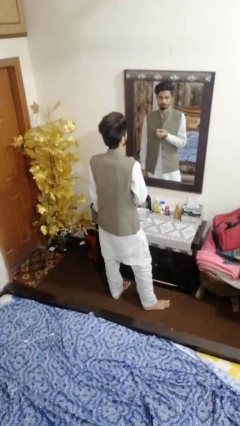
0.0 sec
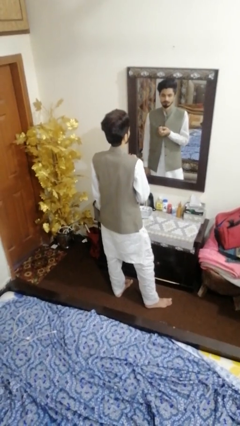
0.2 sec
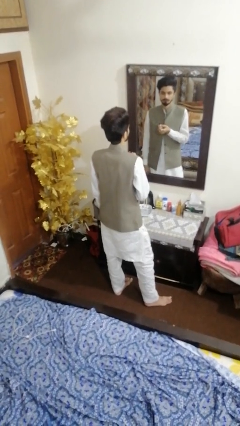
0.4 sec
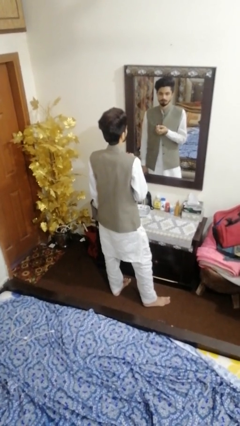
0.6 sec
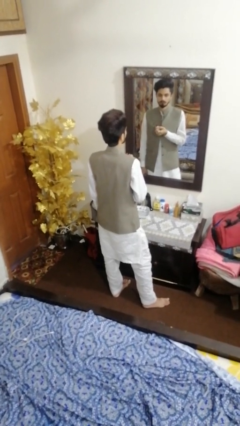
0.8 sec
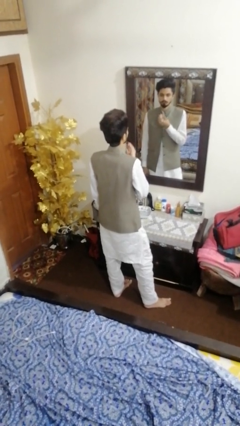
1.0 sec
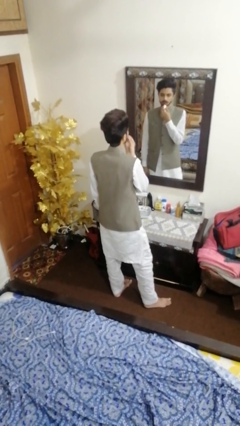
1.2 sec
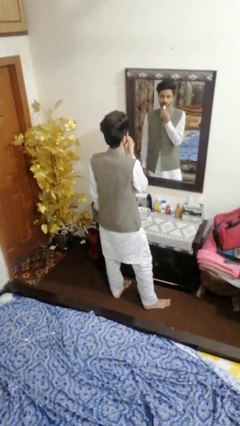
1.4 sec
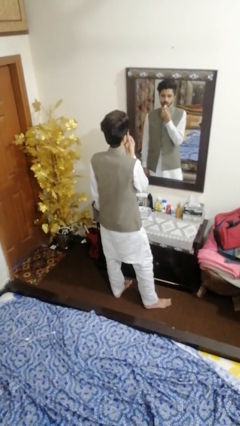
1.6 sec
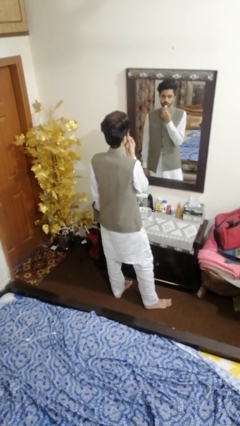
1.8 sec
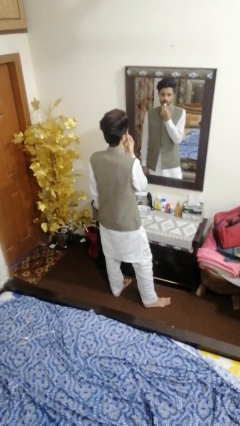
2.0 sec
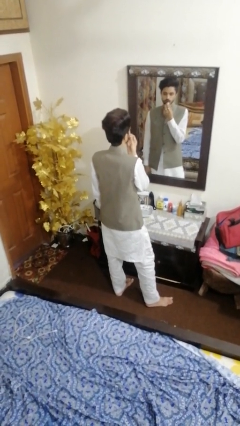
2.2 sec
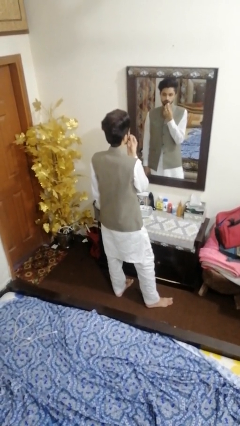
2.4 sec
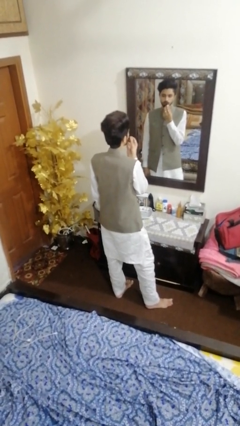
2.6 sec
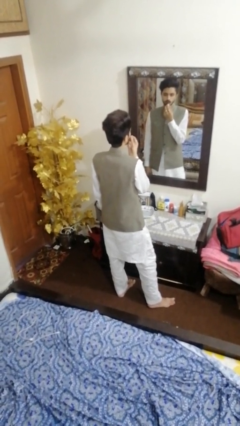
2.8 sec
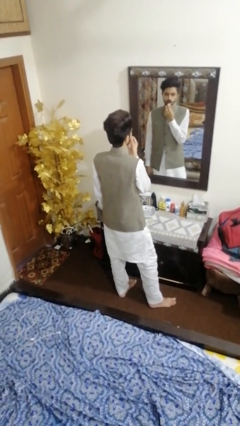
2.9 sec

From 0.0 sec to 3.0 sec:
person applies lip makeup

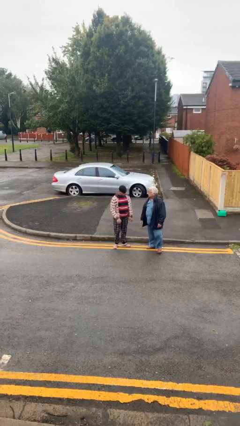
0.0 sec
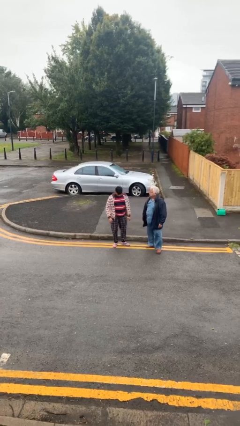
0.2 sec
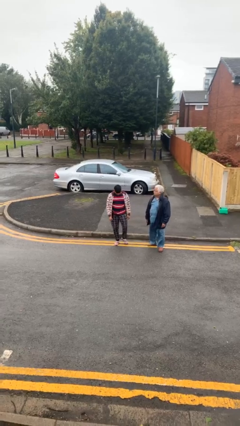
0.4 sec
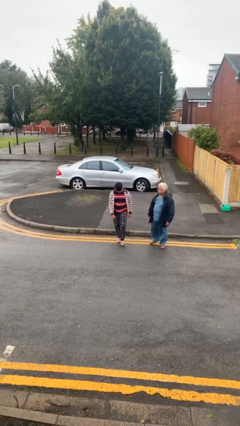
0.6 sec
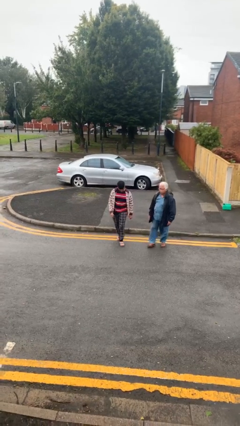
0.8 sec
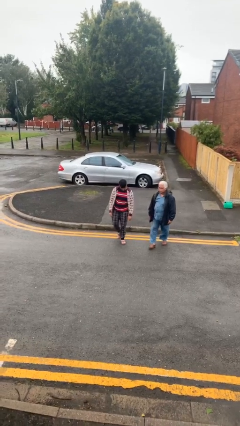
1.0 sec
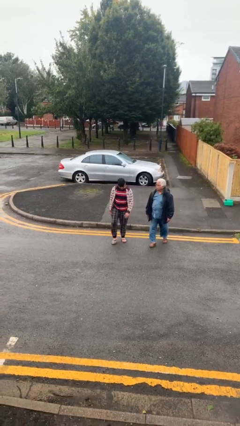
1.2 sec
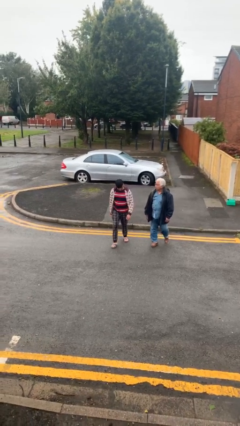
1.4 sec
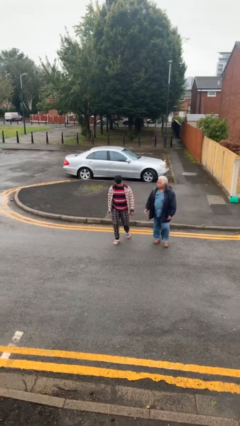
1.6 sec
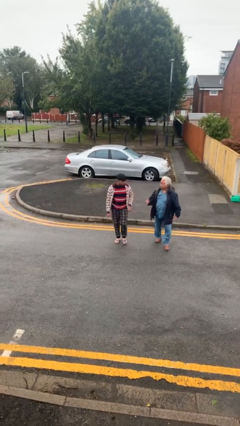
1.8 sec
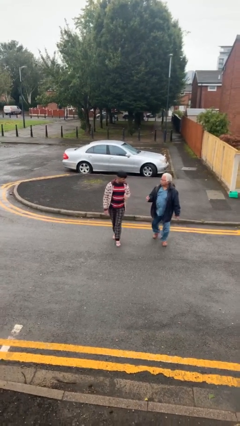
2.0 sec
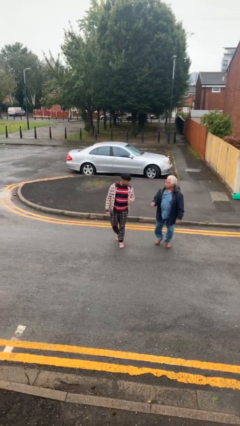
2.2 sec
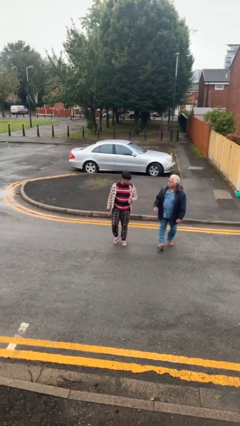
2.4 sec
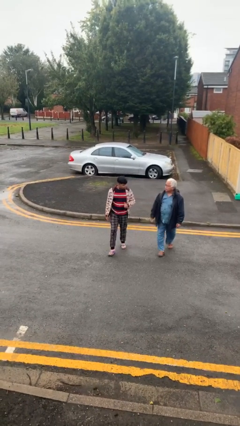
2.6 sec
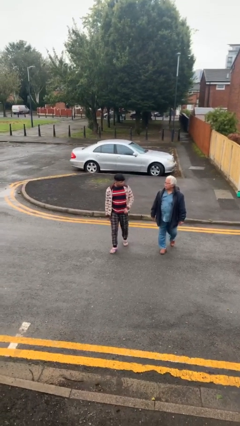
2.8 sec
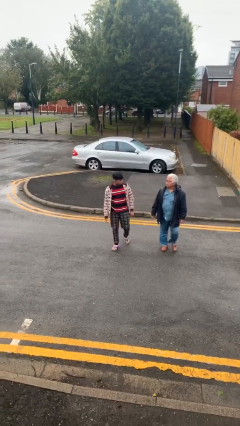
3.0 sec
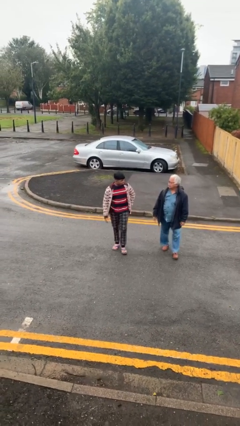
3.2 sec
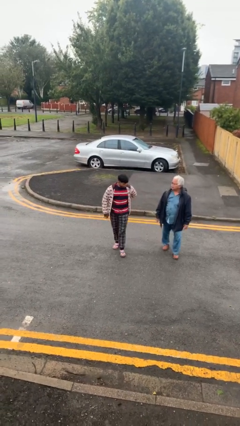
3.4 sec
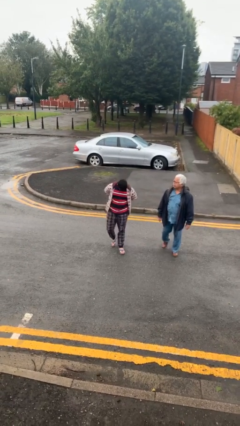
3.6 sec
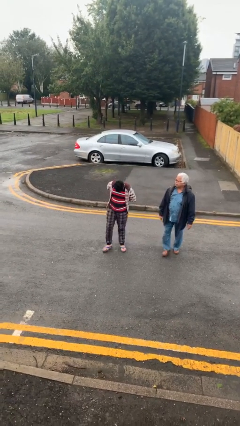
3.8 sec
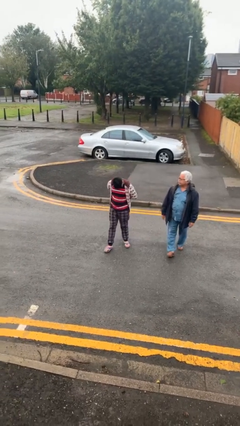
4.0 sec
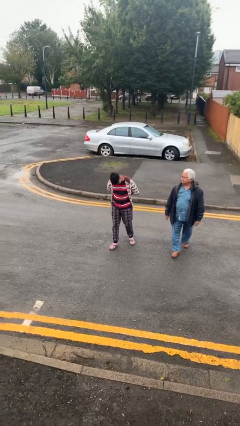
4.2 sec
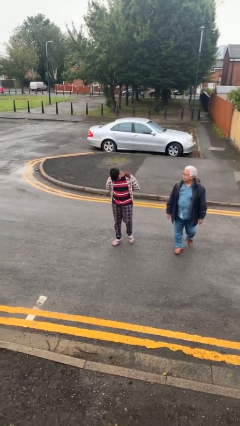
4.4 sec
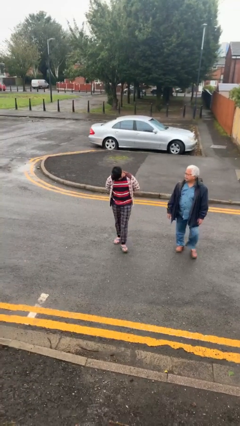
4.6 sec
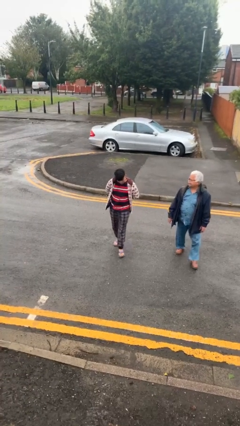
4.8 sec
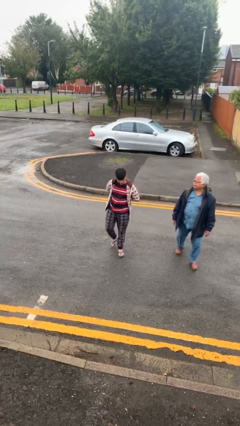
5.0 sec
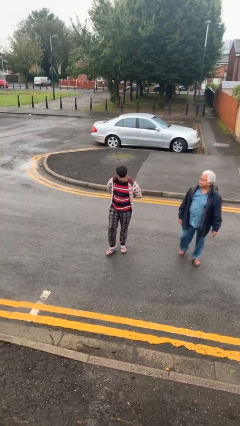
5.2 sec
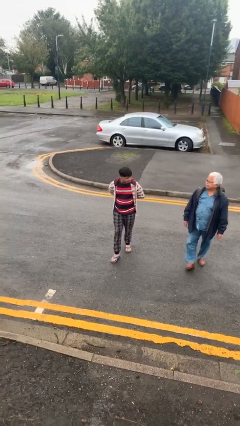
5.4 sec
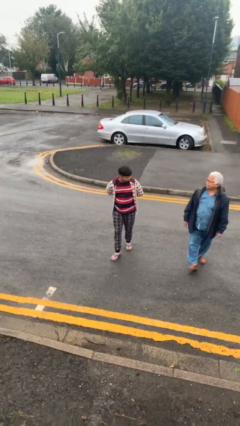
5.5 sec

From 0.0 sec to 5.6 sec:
person talks to person

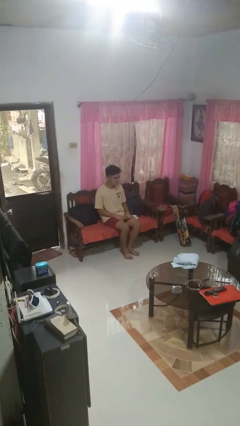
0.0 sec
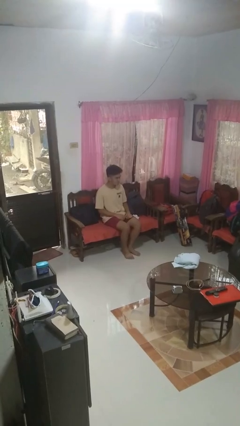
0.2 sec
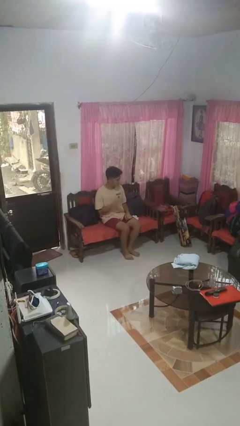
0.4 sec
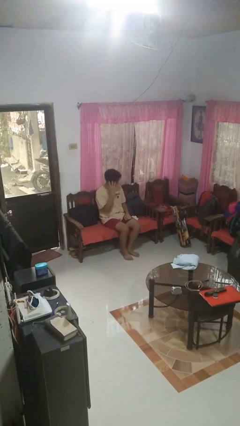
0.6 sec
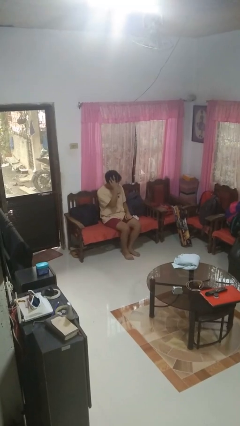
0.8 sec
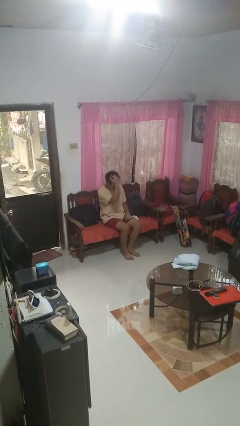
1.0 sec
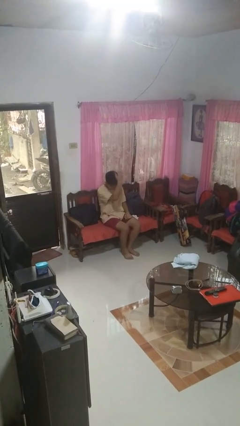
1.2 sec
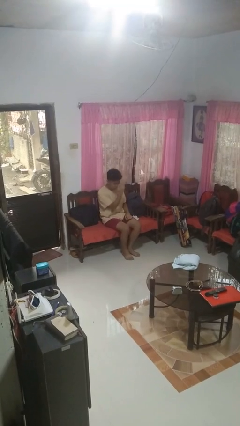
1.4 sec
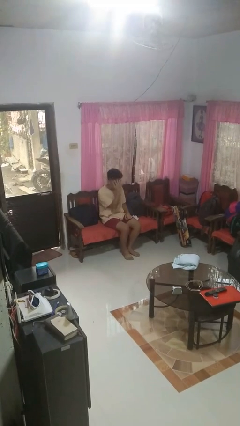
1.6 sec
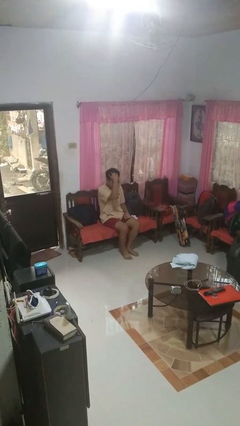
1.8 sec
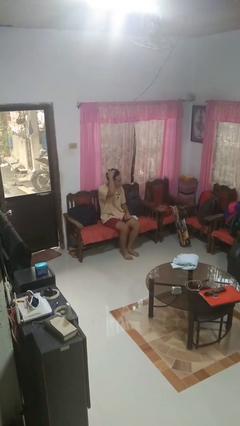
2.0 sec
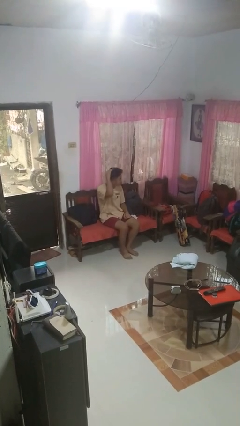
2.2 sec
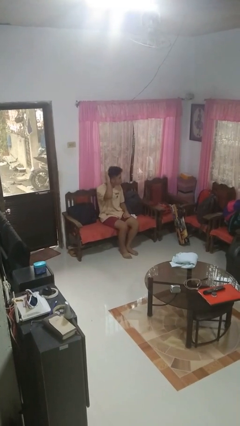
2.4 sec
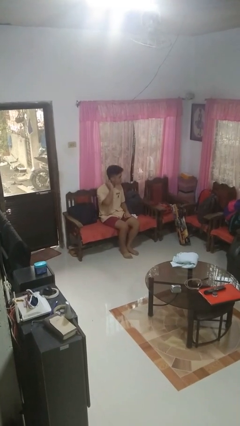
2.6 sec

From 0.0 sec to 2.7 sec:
person strokes hair

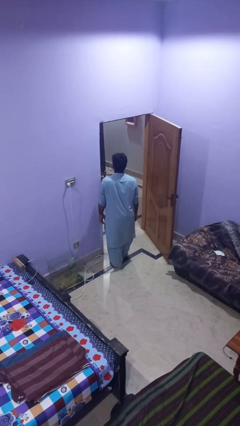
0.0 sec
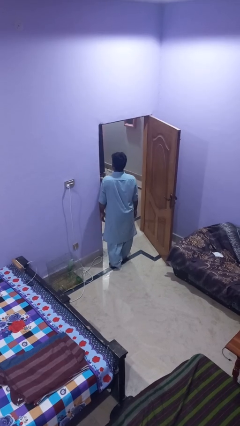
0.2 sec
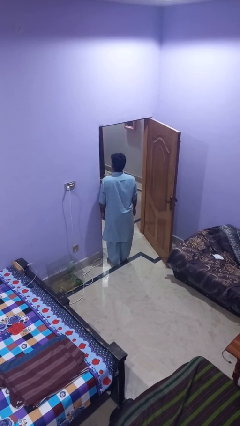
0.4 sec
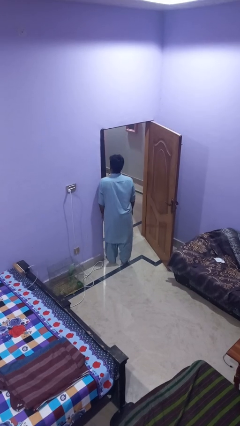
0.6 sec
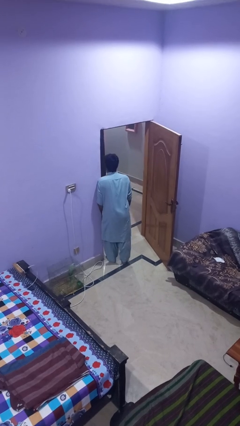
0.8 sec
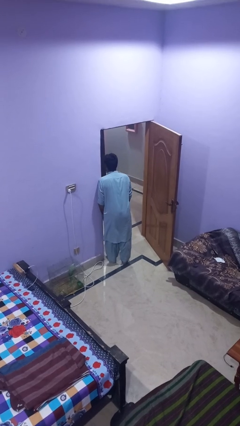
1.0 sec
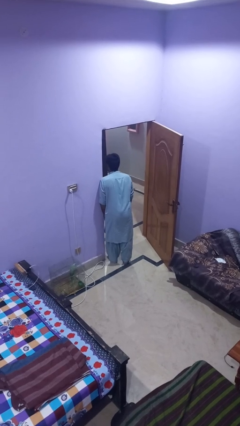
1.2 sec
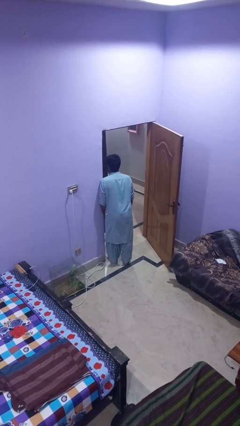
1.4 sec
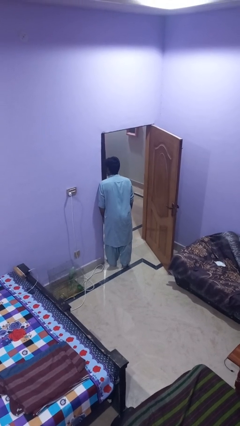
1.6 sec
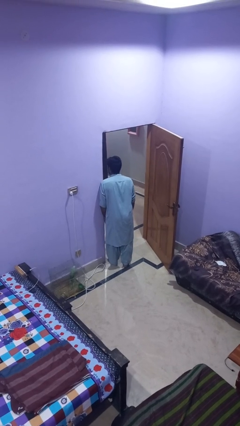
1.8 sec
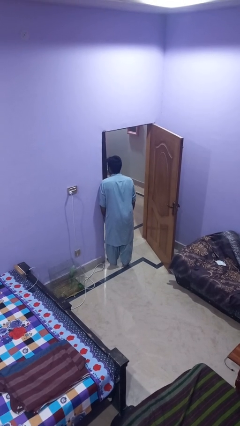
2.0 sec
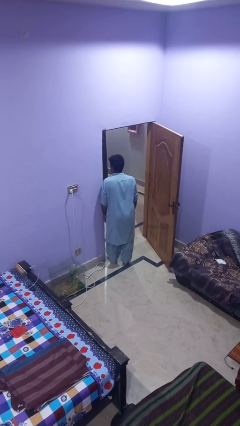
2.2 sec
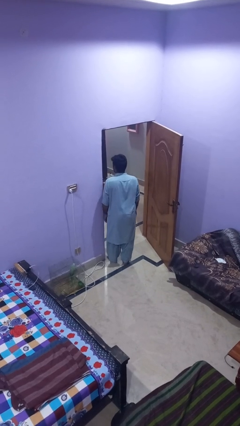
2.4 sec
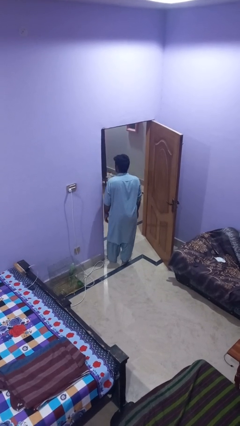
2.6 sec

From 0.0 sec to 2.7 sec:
person bumps into wall

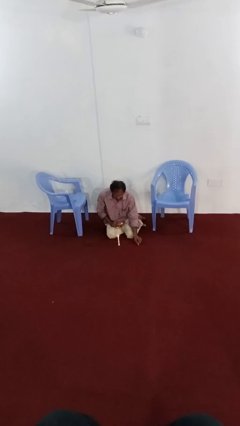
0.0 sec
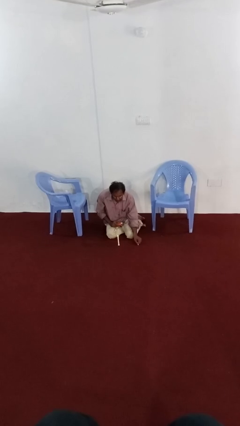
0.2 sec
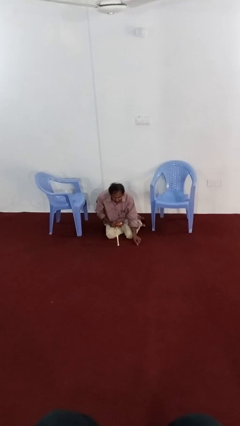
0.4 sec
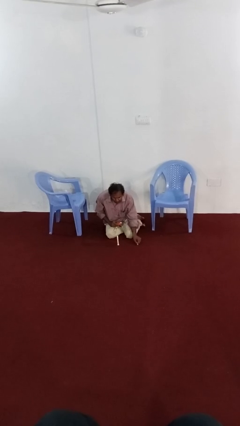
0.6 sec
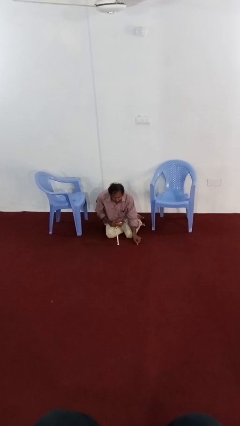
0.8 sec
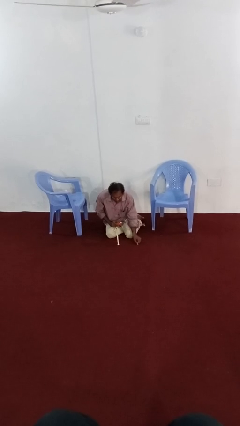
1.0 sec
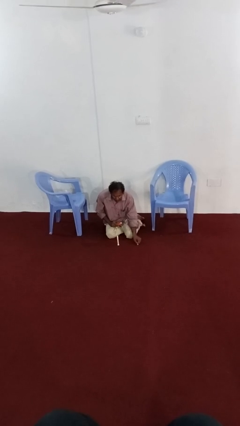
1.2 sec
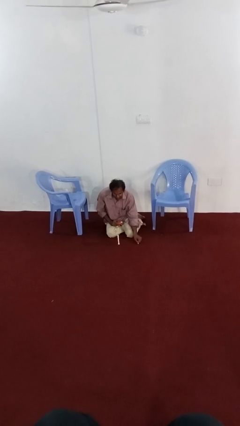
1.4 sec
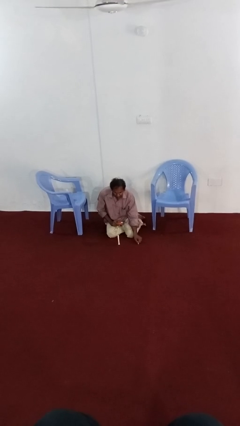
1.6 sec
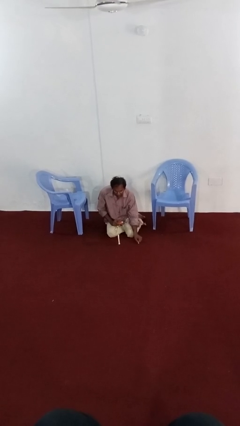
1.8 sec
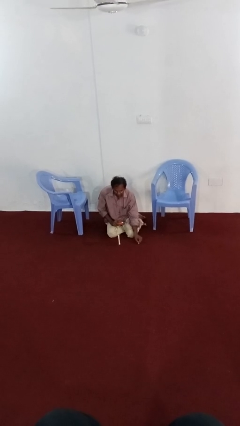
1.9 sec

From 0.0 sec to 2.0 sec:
person extinguishes candle

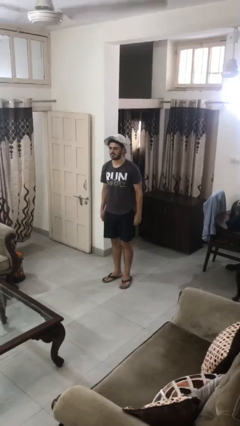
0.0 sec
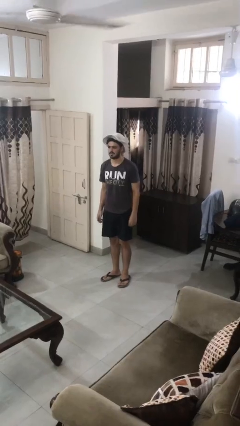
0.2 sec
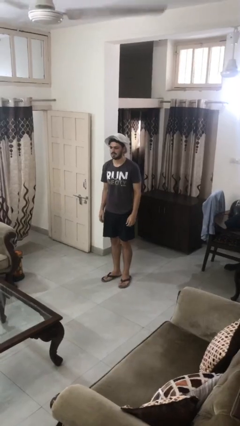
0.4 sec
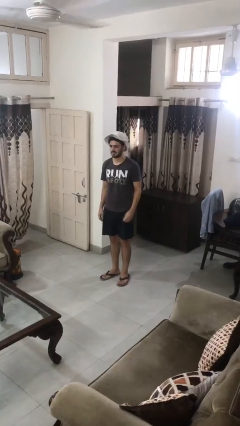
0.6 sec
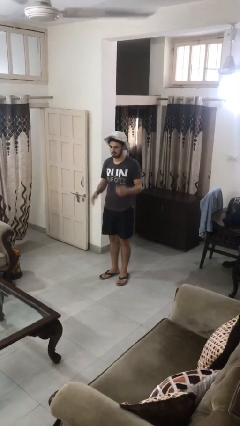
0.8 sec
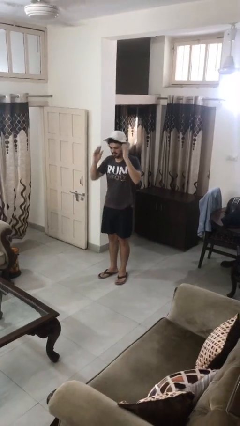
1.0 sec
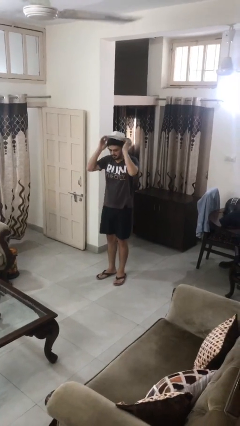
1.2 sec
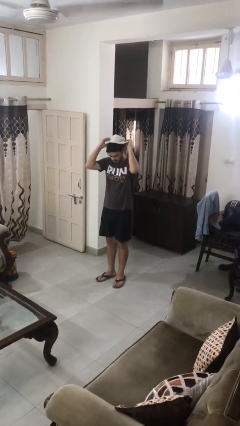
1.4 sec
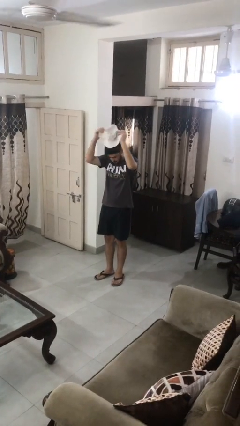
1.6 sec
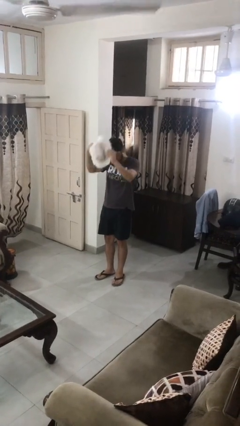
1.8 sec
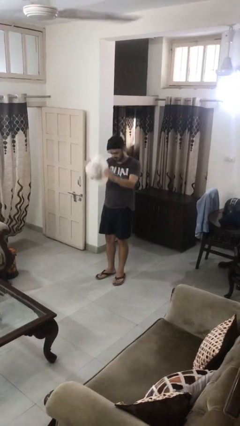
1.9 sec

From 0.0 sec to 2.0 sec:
person takes off hat
